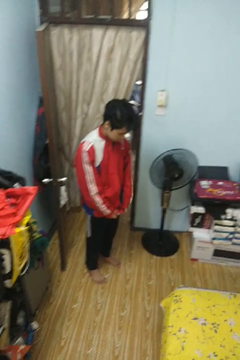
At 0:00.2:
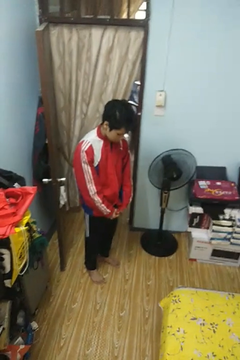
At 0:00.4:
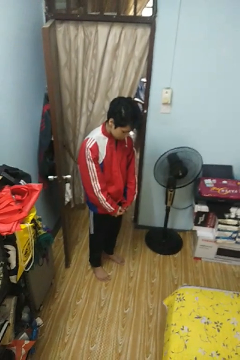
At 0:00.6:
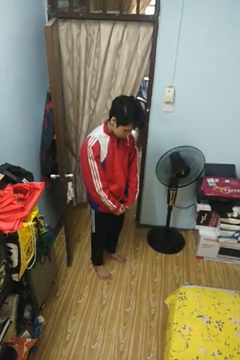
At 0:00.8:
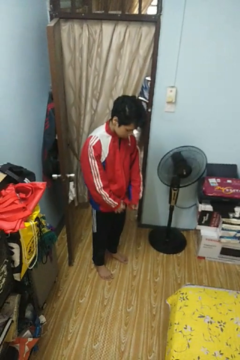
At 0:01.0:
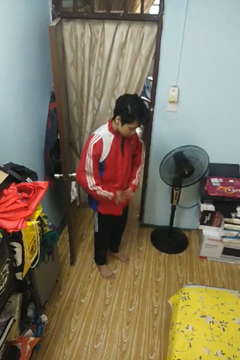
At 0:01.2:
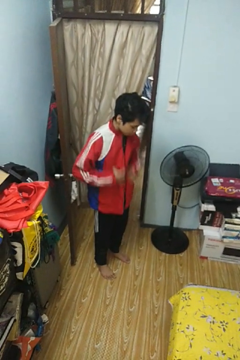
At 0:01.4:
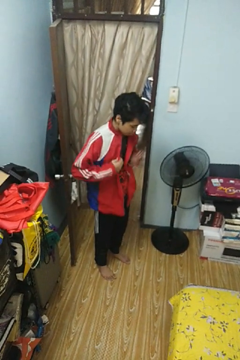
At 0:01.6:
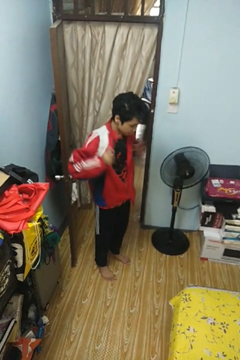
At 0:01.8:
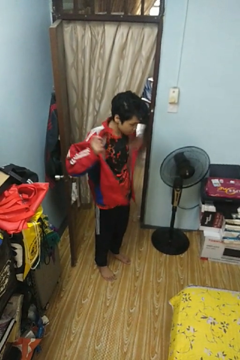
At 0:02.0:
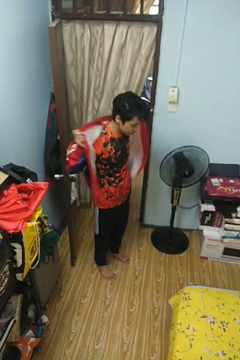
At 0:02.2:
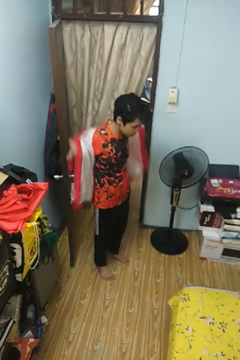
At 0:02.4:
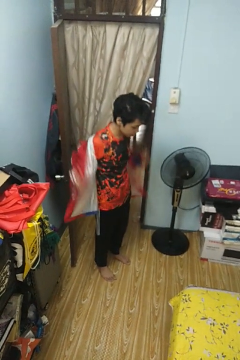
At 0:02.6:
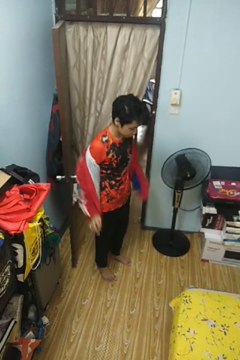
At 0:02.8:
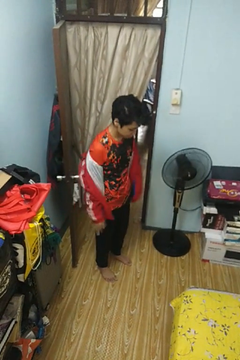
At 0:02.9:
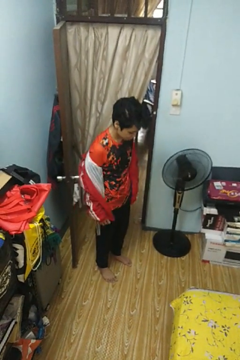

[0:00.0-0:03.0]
person takes off jacket

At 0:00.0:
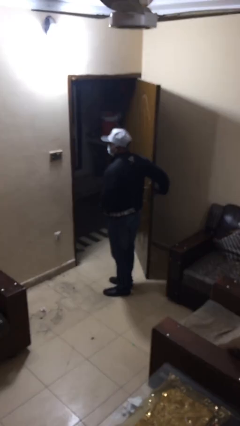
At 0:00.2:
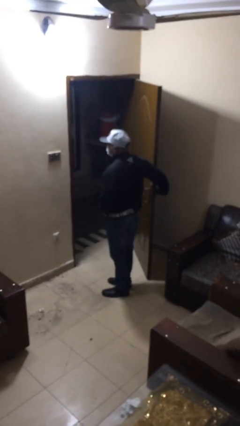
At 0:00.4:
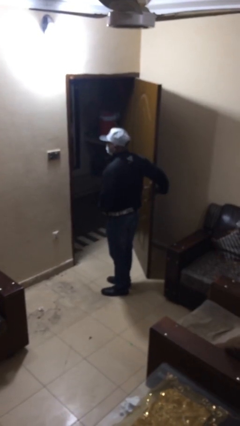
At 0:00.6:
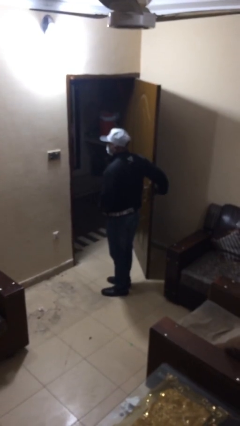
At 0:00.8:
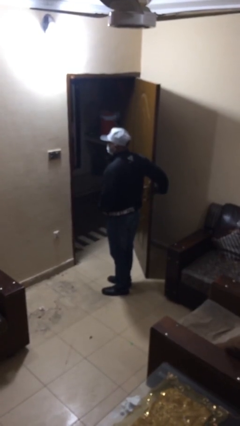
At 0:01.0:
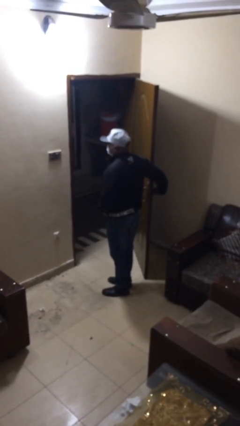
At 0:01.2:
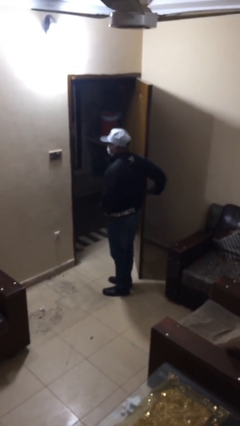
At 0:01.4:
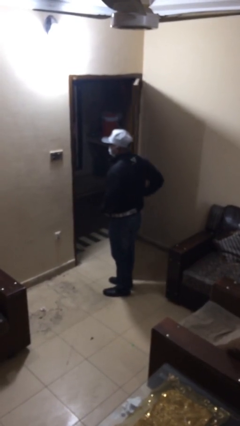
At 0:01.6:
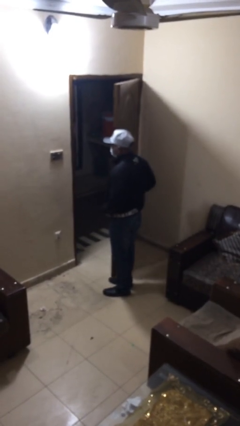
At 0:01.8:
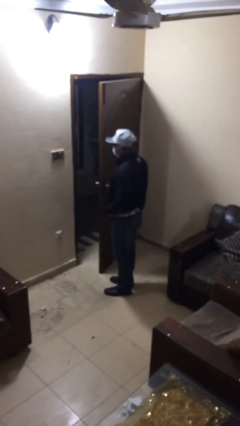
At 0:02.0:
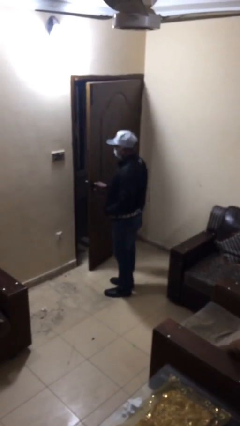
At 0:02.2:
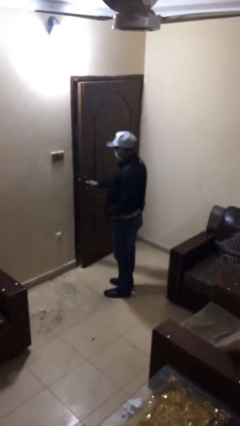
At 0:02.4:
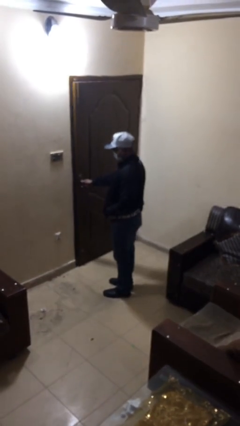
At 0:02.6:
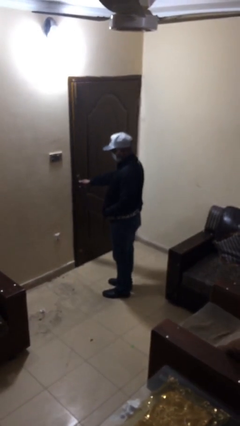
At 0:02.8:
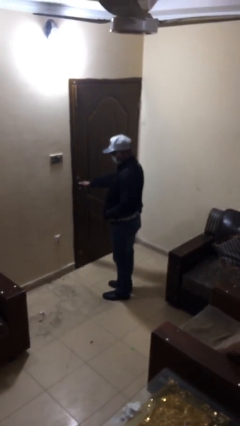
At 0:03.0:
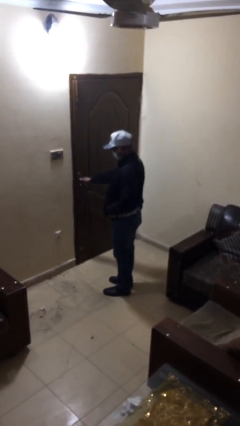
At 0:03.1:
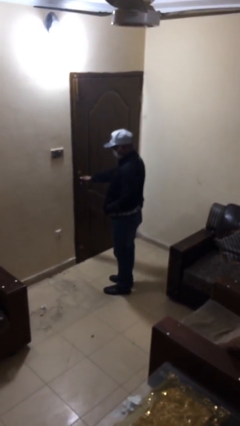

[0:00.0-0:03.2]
person closes facility door

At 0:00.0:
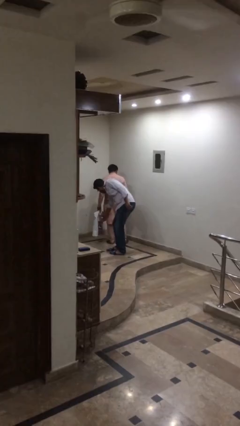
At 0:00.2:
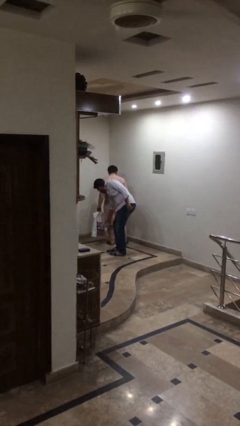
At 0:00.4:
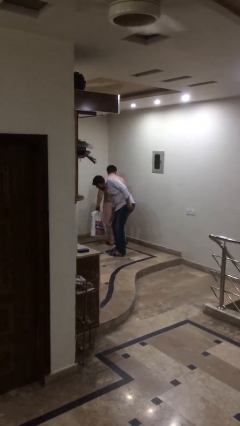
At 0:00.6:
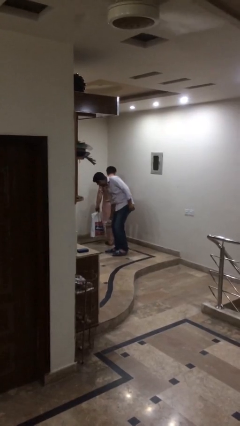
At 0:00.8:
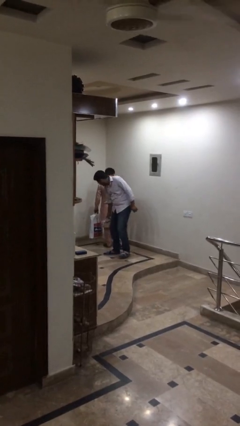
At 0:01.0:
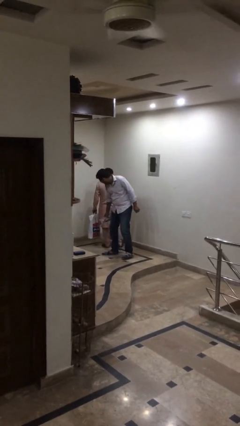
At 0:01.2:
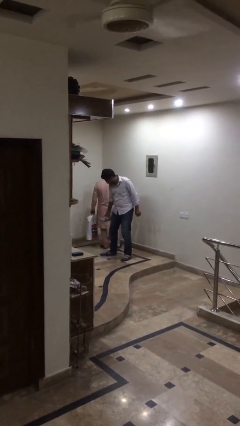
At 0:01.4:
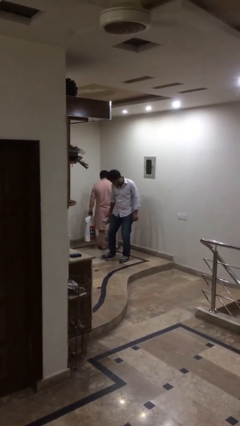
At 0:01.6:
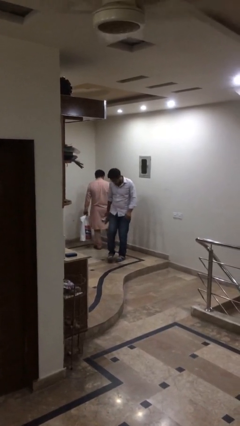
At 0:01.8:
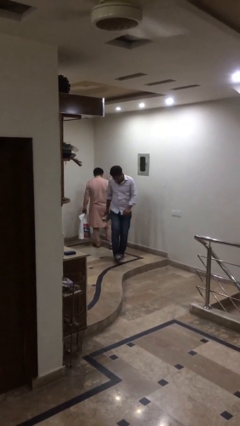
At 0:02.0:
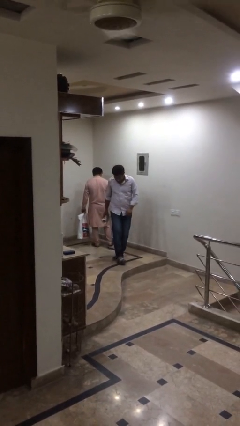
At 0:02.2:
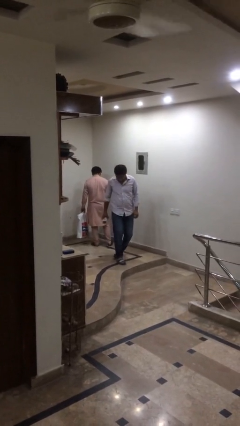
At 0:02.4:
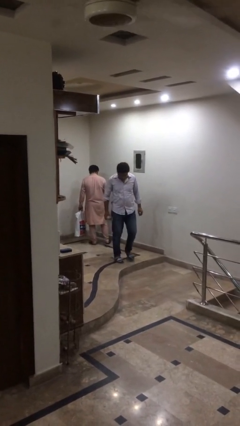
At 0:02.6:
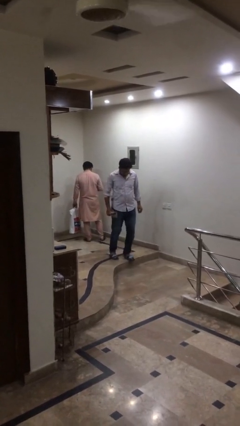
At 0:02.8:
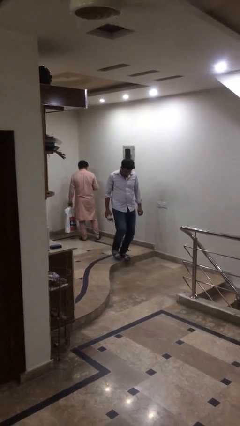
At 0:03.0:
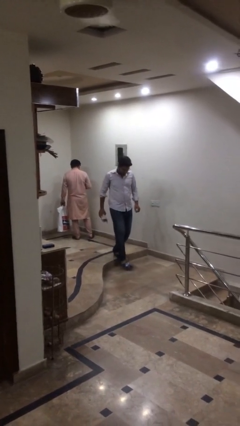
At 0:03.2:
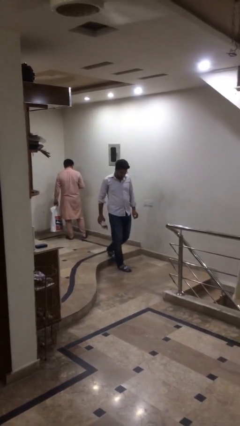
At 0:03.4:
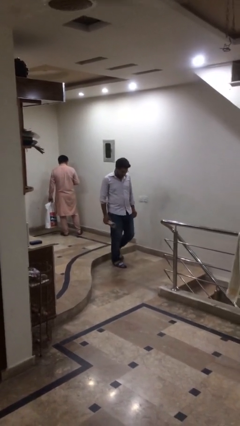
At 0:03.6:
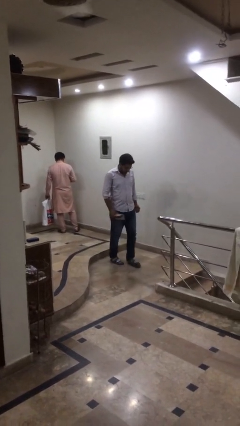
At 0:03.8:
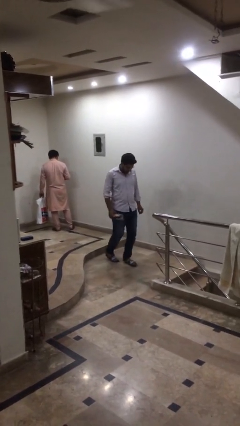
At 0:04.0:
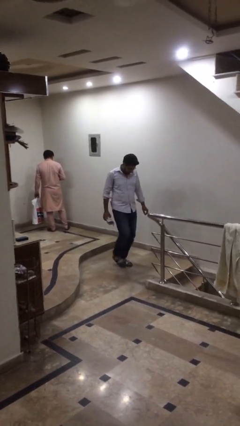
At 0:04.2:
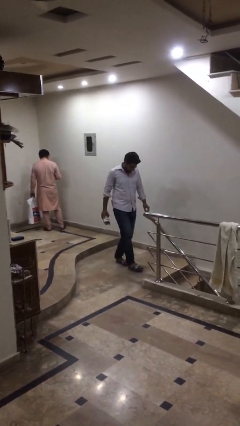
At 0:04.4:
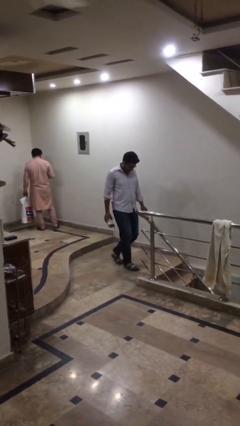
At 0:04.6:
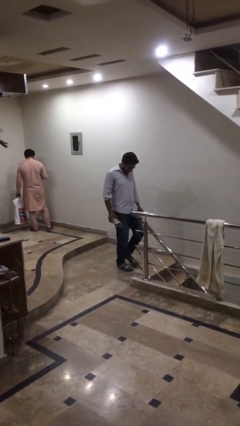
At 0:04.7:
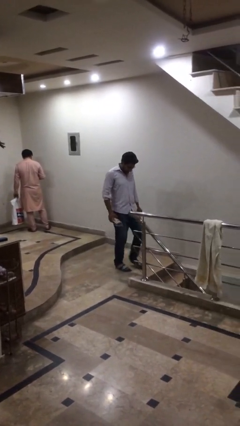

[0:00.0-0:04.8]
person steals object from person

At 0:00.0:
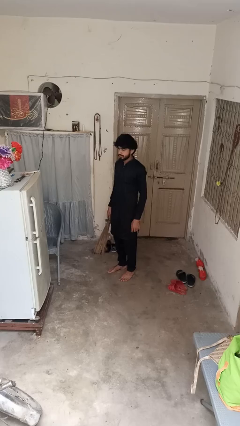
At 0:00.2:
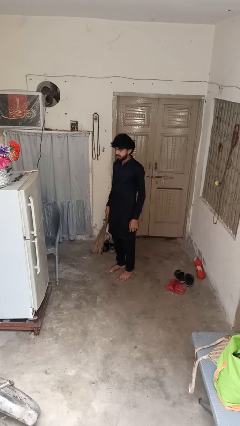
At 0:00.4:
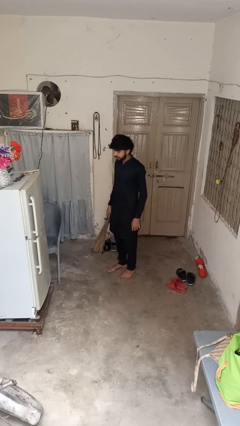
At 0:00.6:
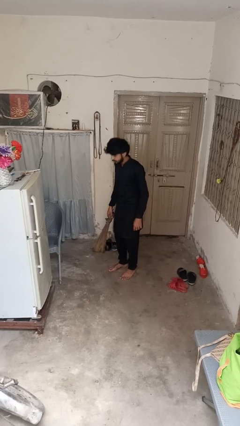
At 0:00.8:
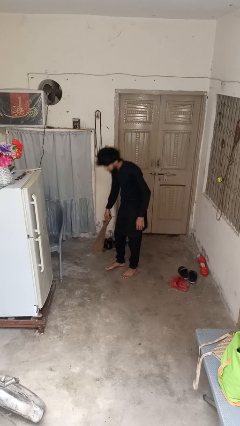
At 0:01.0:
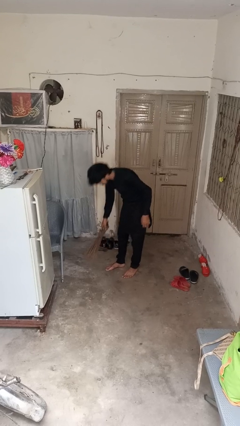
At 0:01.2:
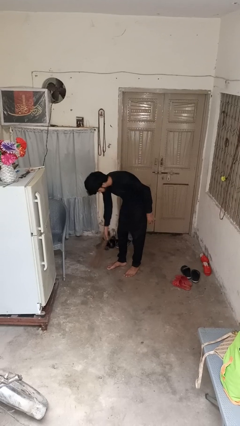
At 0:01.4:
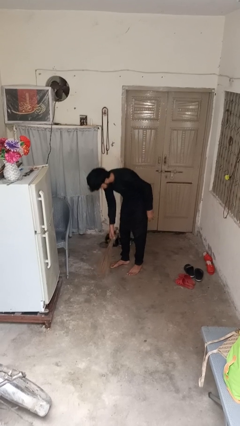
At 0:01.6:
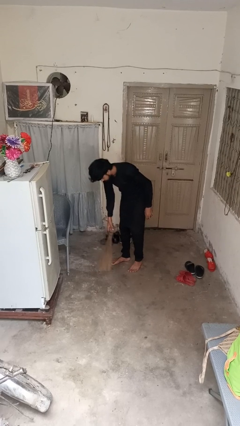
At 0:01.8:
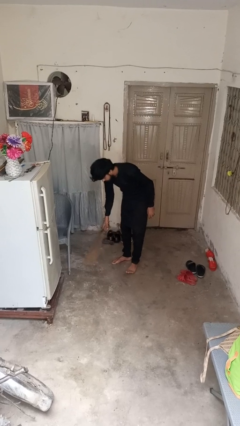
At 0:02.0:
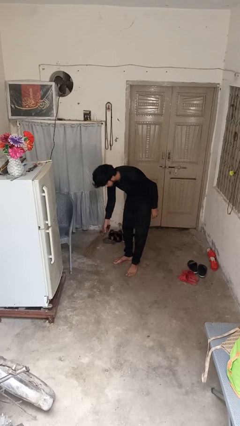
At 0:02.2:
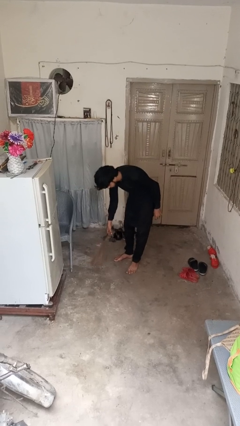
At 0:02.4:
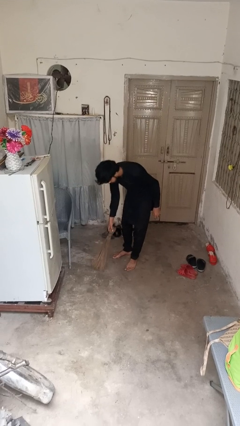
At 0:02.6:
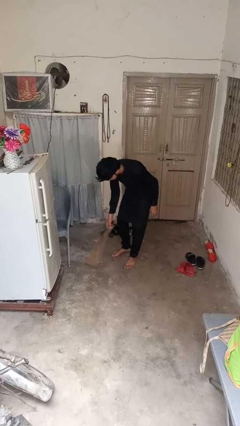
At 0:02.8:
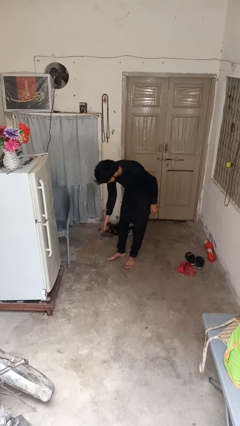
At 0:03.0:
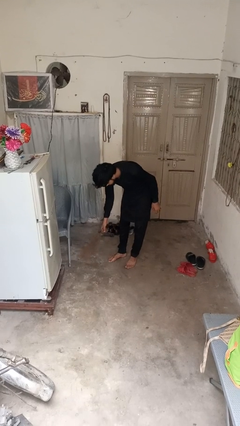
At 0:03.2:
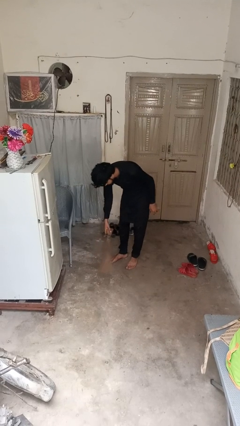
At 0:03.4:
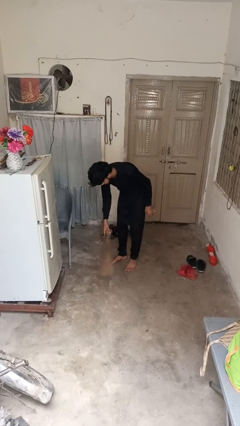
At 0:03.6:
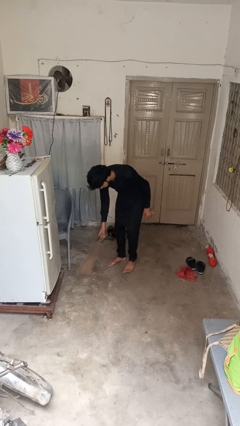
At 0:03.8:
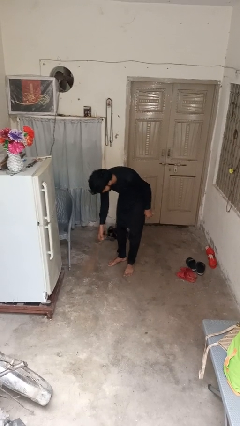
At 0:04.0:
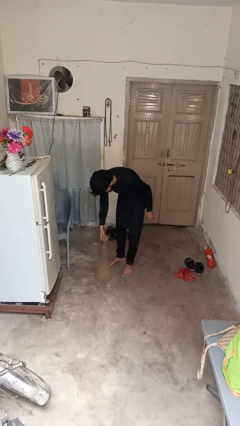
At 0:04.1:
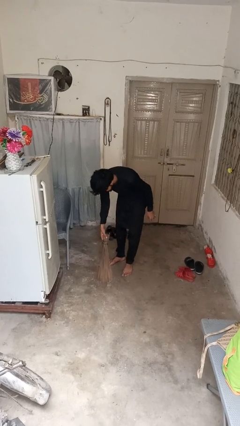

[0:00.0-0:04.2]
person sweeps floor

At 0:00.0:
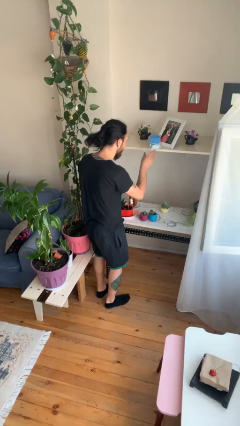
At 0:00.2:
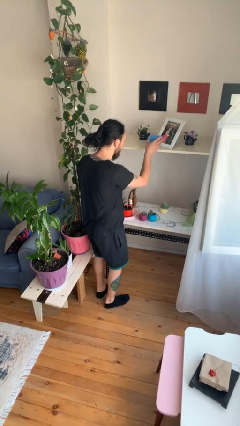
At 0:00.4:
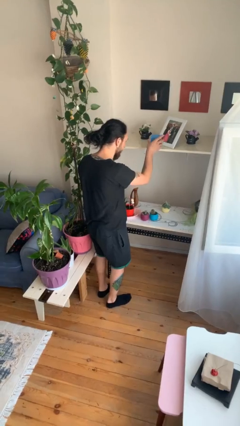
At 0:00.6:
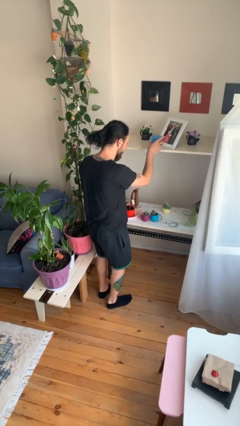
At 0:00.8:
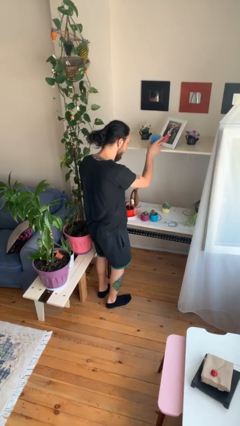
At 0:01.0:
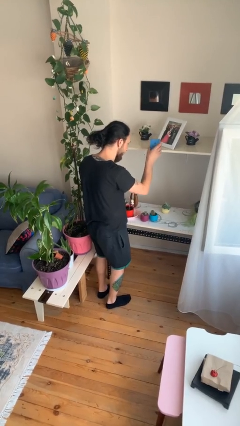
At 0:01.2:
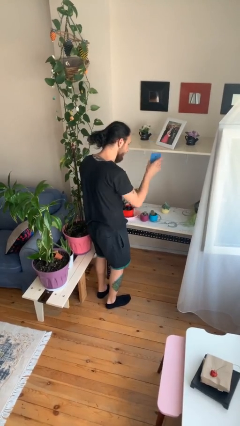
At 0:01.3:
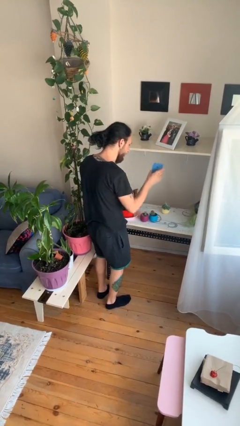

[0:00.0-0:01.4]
person picks up object from shelf

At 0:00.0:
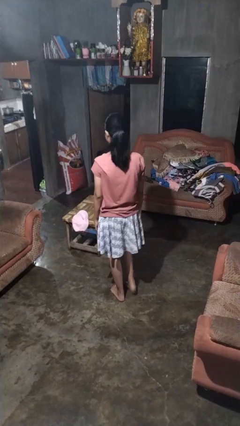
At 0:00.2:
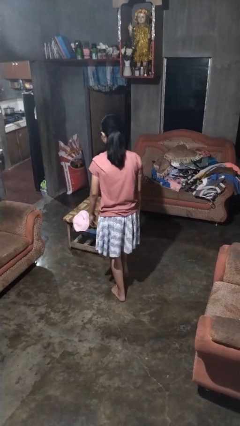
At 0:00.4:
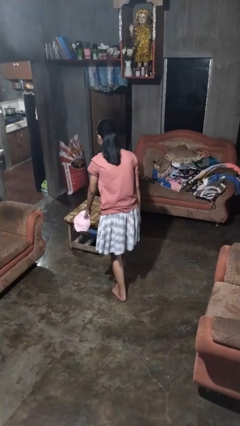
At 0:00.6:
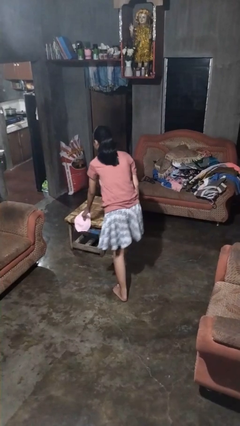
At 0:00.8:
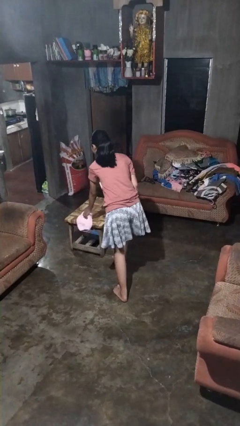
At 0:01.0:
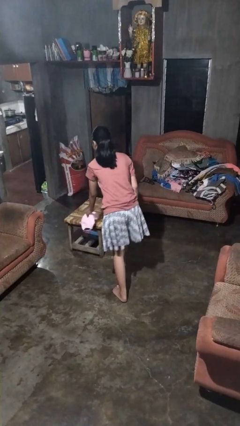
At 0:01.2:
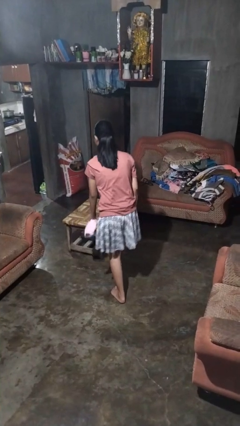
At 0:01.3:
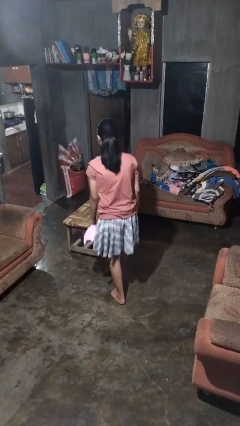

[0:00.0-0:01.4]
person picks up object from table
